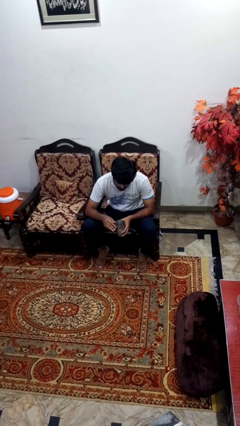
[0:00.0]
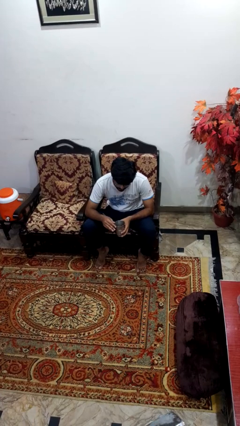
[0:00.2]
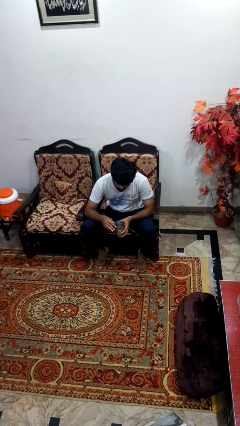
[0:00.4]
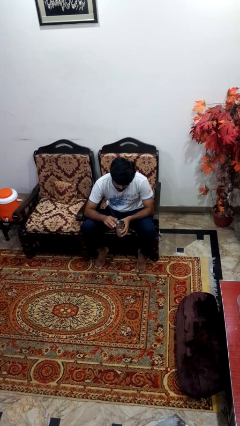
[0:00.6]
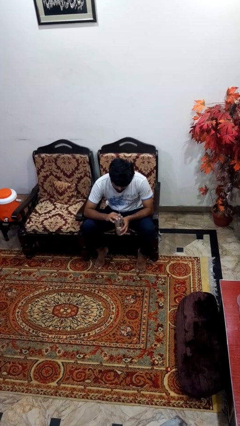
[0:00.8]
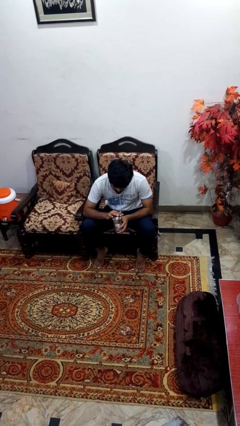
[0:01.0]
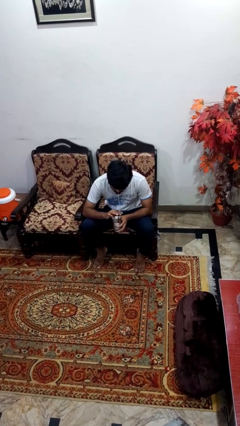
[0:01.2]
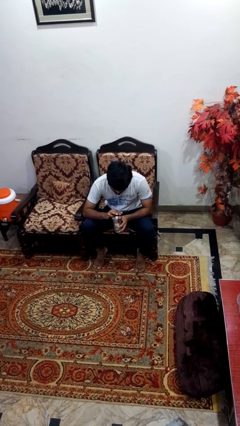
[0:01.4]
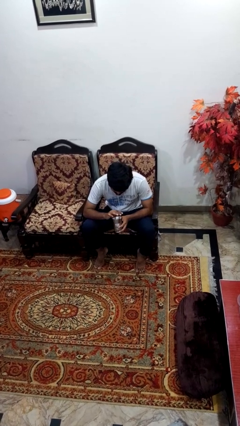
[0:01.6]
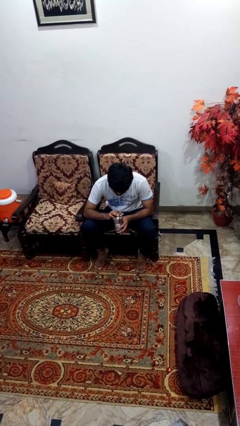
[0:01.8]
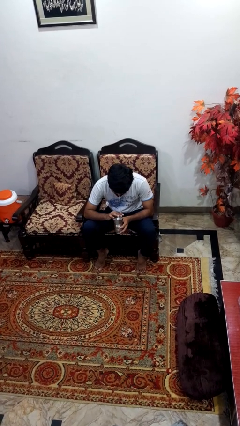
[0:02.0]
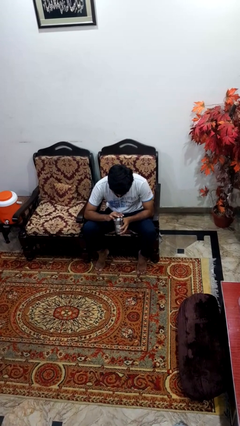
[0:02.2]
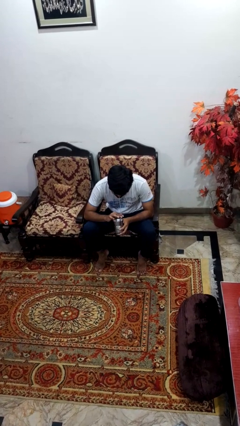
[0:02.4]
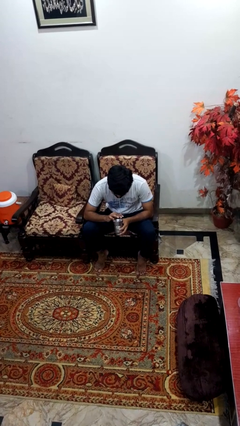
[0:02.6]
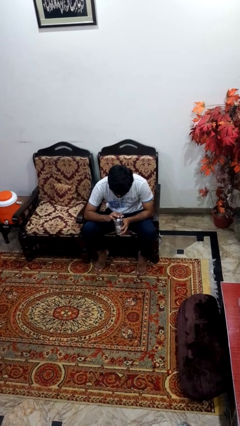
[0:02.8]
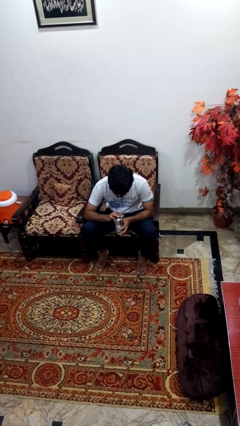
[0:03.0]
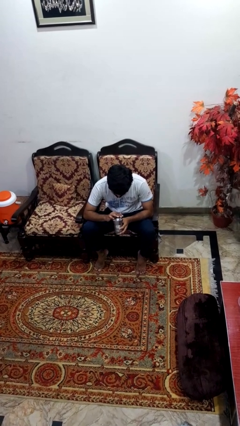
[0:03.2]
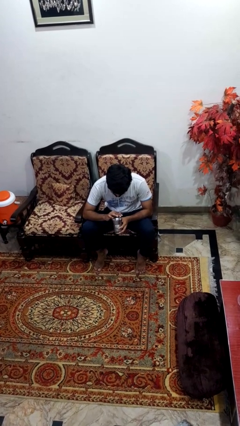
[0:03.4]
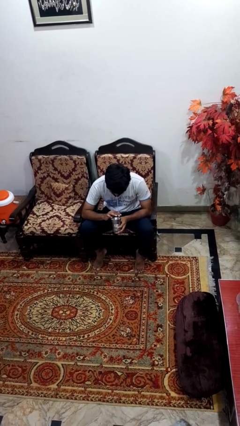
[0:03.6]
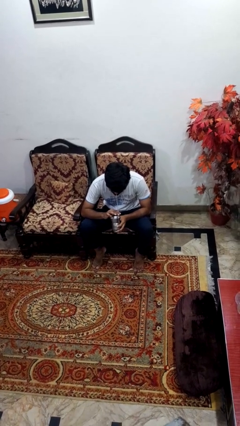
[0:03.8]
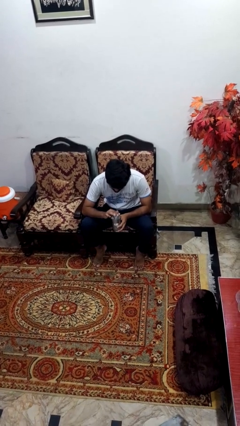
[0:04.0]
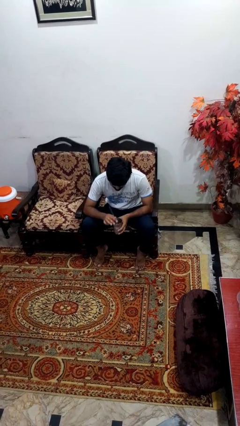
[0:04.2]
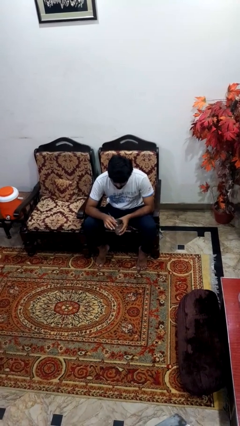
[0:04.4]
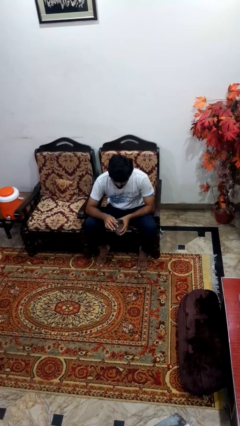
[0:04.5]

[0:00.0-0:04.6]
person drinks from straw

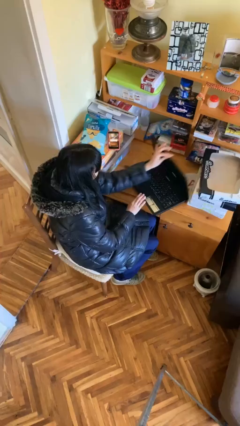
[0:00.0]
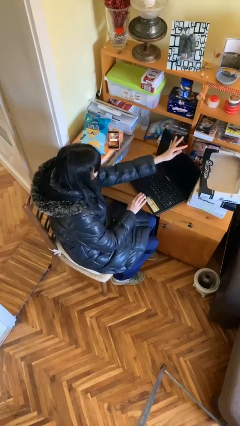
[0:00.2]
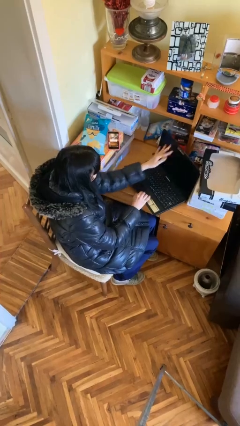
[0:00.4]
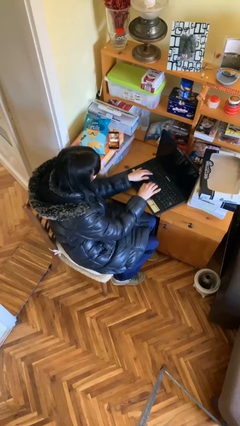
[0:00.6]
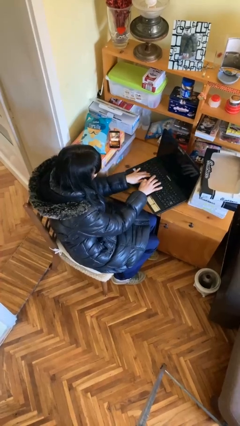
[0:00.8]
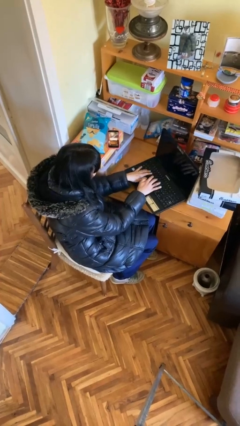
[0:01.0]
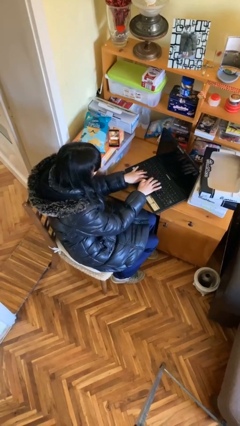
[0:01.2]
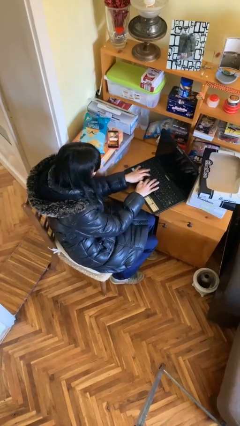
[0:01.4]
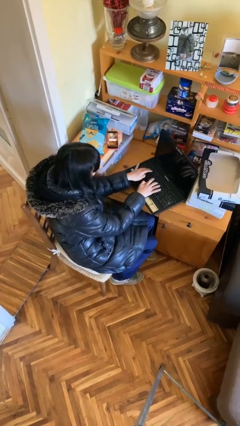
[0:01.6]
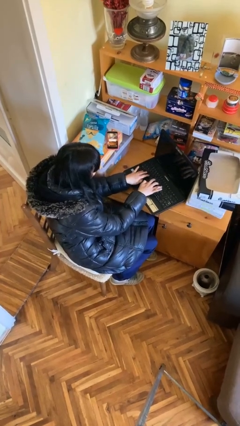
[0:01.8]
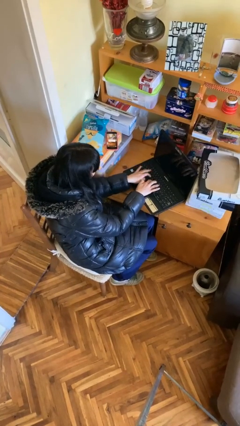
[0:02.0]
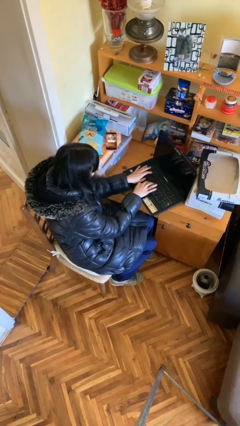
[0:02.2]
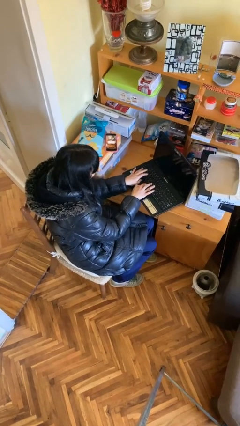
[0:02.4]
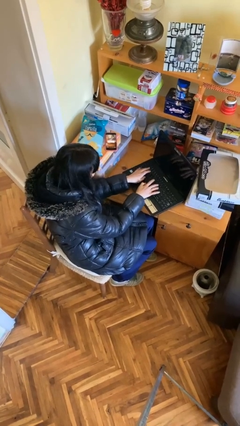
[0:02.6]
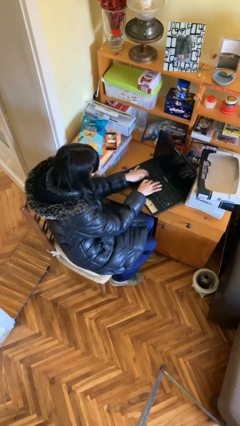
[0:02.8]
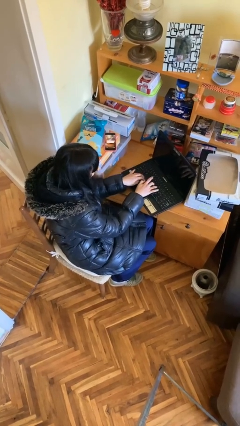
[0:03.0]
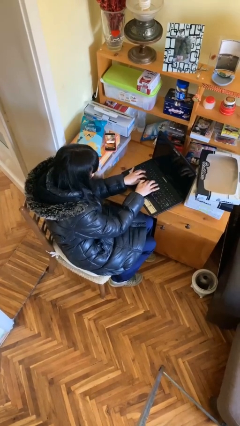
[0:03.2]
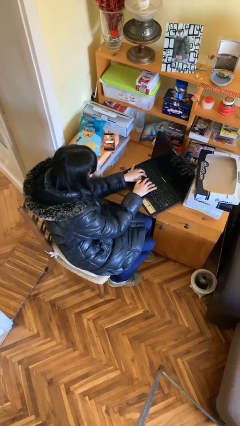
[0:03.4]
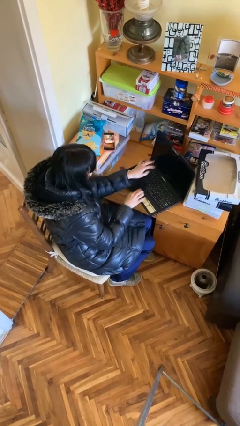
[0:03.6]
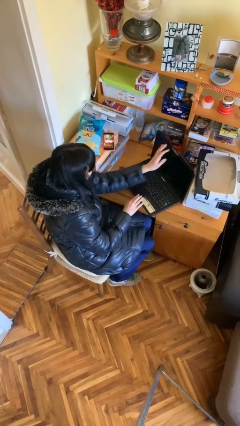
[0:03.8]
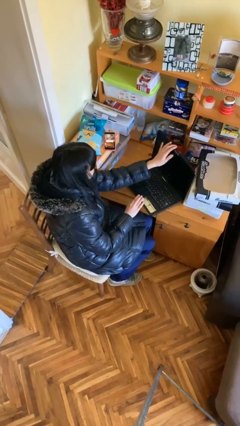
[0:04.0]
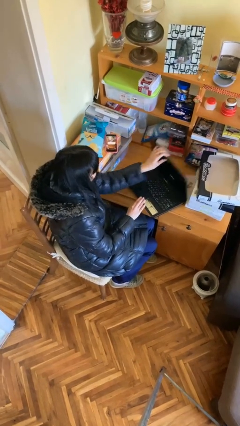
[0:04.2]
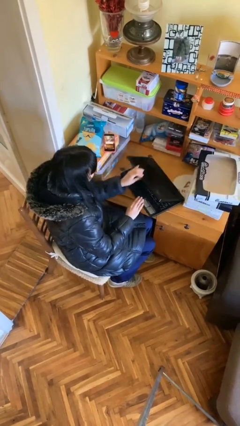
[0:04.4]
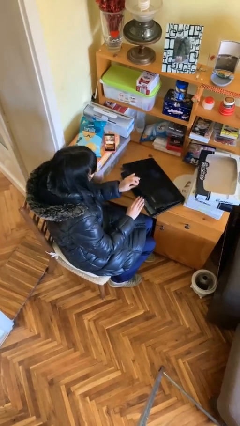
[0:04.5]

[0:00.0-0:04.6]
person interacts with laptop

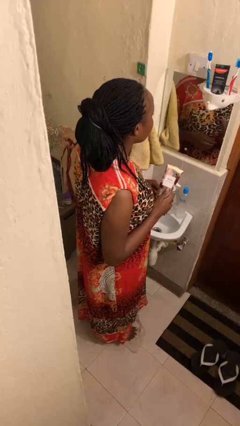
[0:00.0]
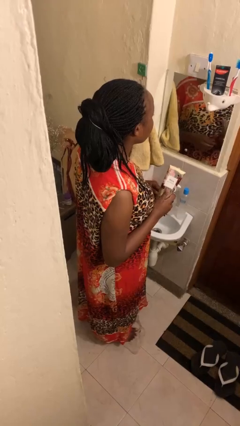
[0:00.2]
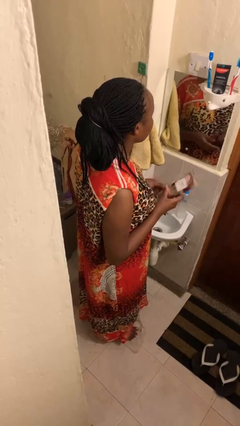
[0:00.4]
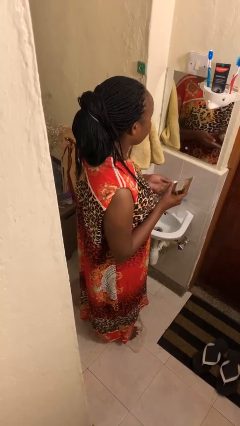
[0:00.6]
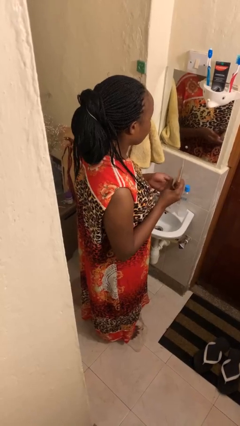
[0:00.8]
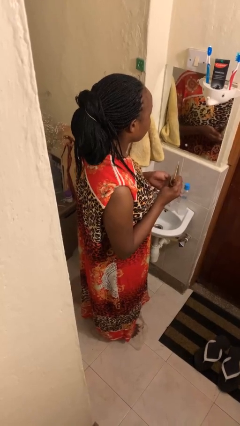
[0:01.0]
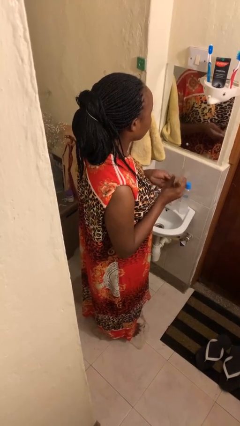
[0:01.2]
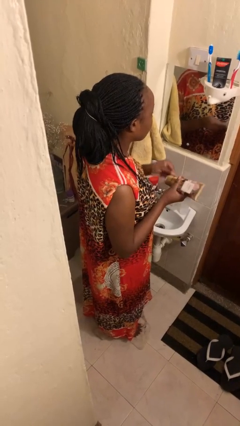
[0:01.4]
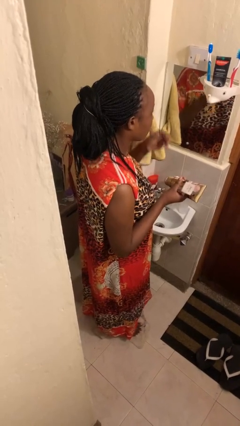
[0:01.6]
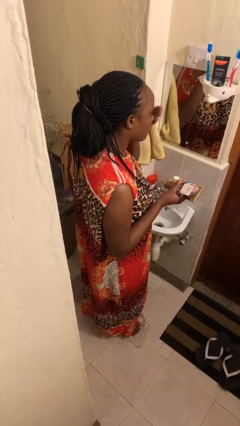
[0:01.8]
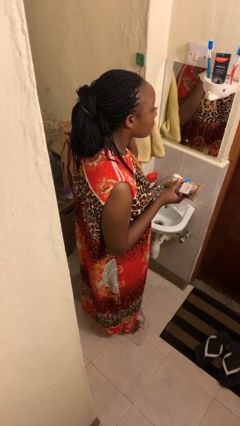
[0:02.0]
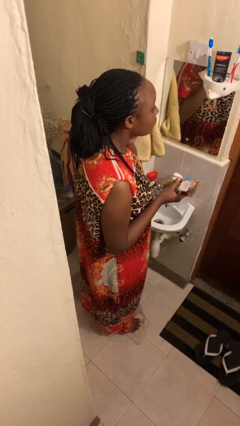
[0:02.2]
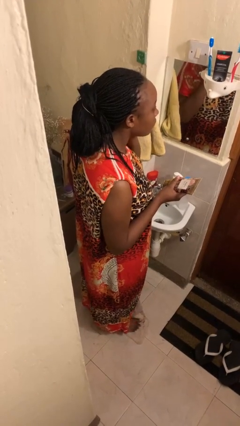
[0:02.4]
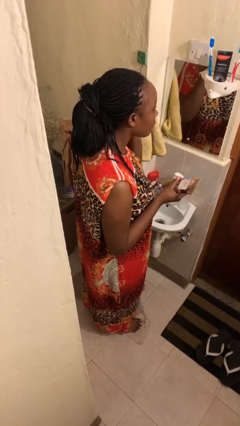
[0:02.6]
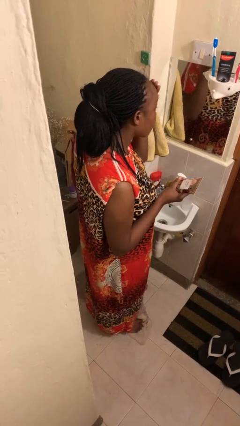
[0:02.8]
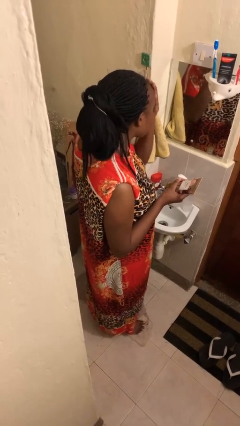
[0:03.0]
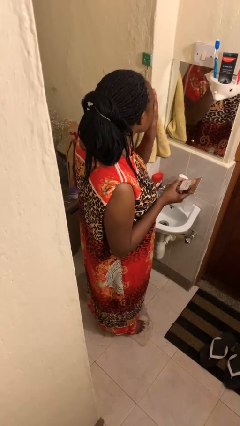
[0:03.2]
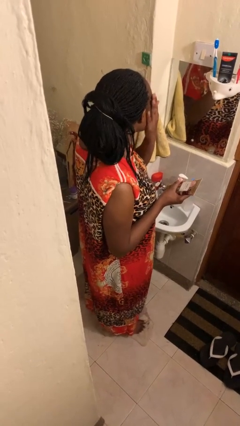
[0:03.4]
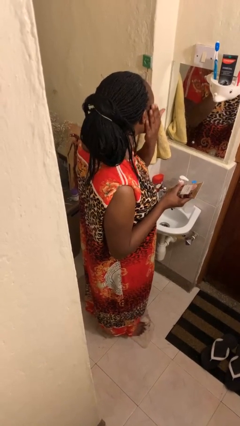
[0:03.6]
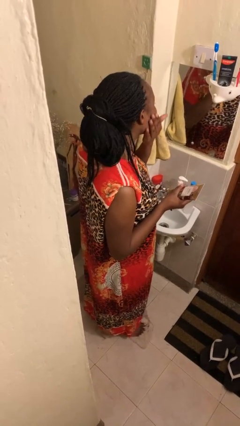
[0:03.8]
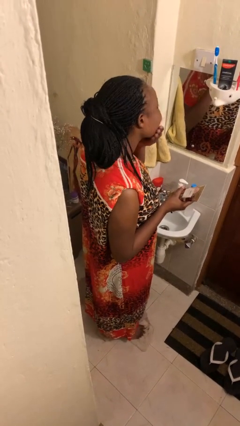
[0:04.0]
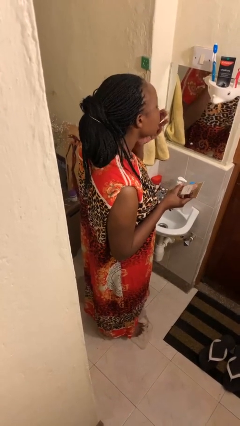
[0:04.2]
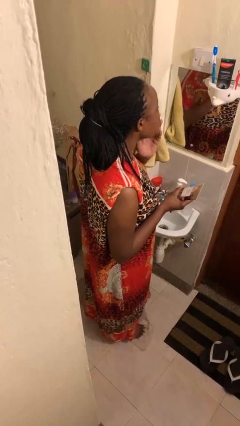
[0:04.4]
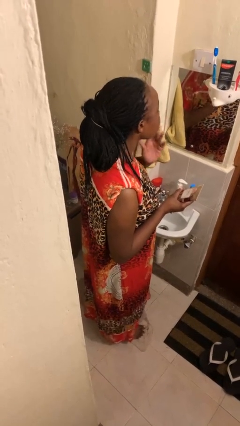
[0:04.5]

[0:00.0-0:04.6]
person applies facial moisturizer

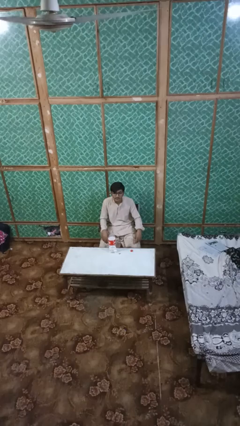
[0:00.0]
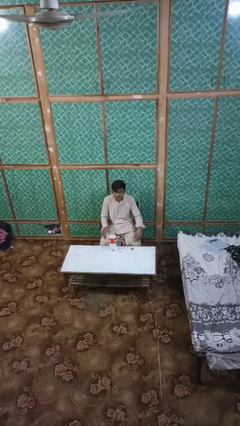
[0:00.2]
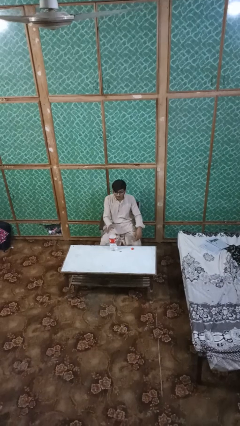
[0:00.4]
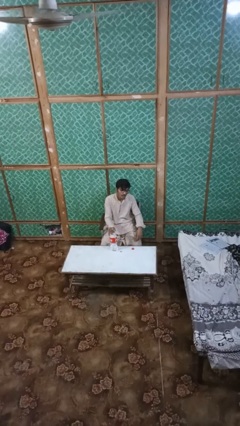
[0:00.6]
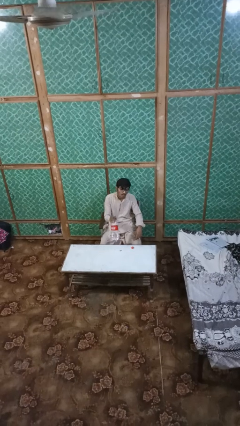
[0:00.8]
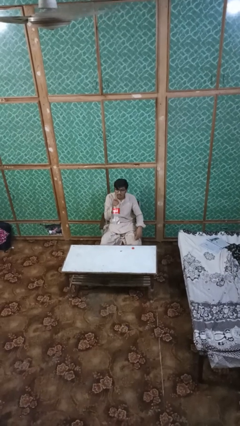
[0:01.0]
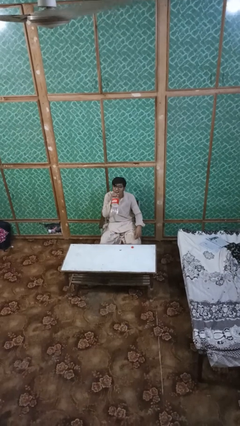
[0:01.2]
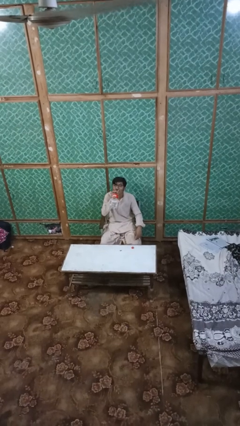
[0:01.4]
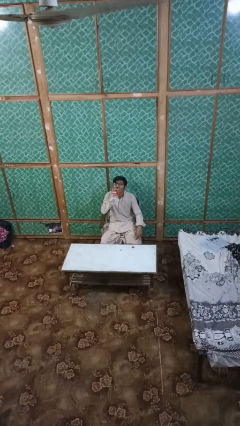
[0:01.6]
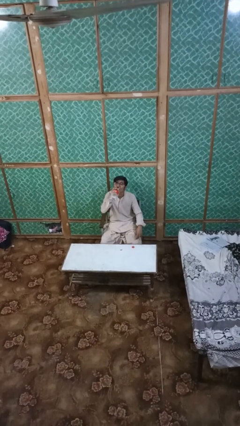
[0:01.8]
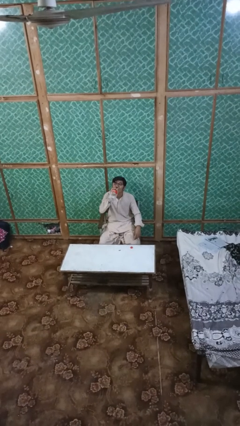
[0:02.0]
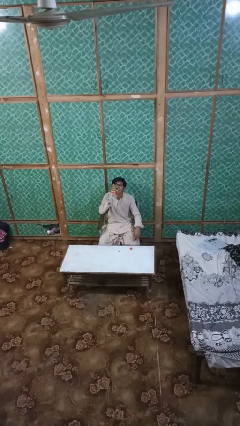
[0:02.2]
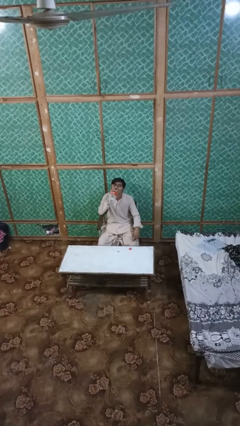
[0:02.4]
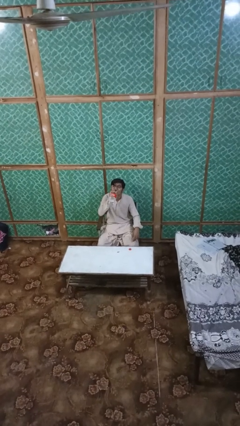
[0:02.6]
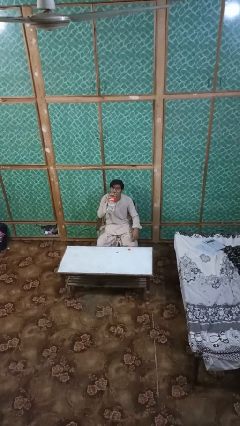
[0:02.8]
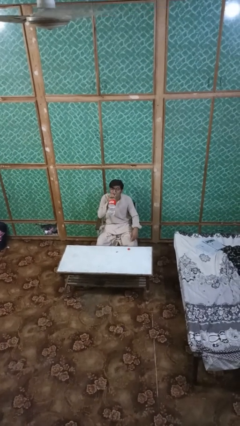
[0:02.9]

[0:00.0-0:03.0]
person drinks from bottle

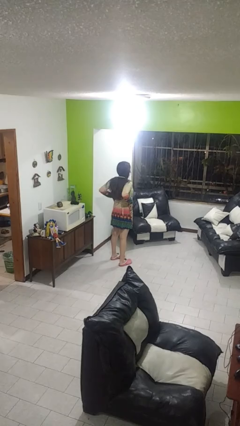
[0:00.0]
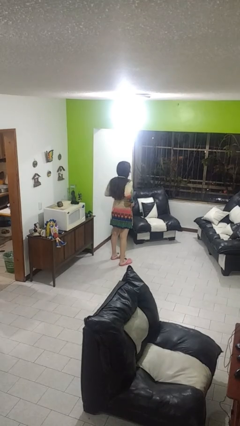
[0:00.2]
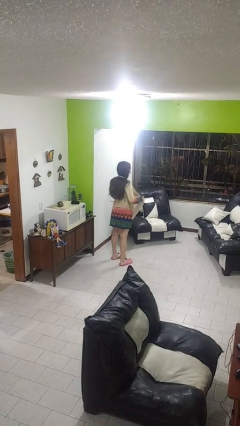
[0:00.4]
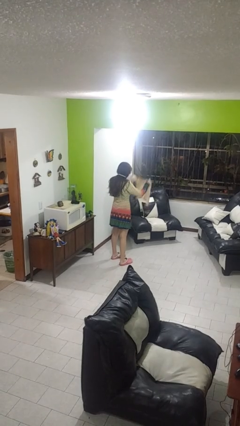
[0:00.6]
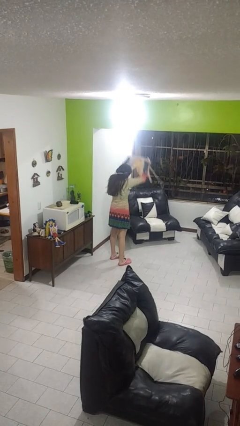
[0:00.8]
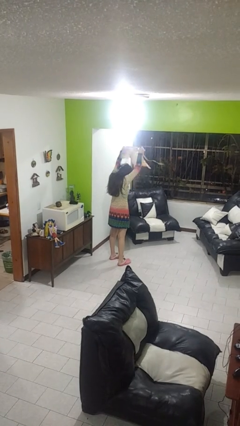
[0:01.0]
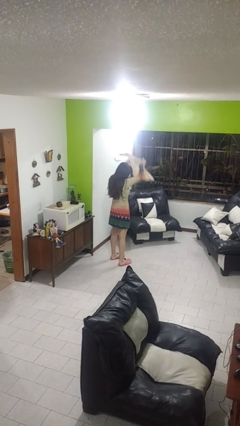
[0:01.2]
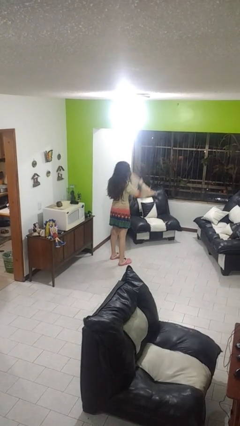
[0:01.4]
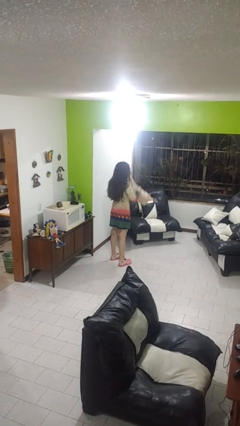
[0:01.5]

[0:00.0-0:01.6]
person takes off apron
